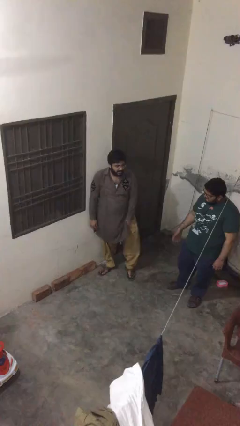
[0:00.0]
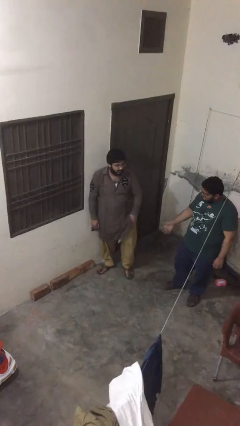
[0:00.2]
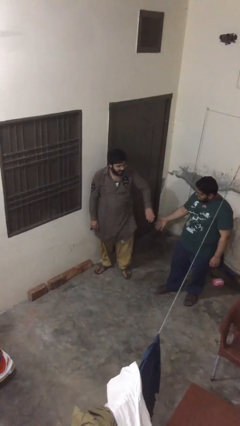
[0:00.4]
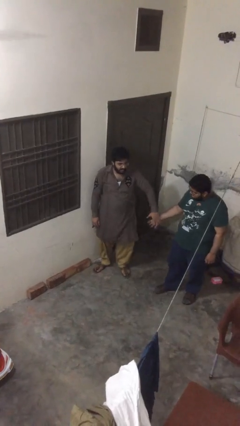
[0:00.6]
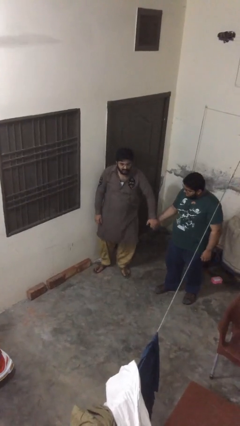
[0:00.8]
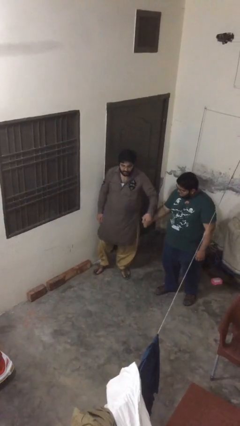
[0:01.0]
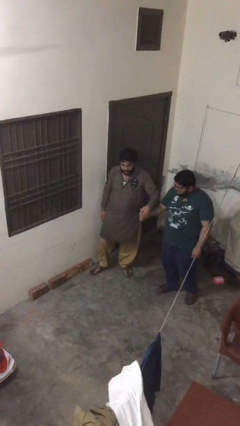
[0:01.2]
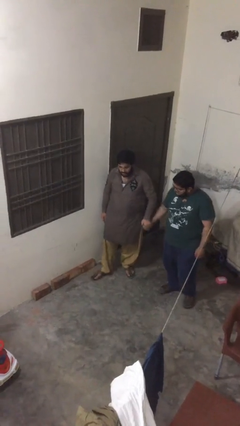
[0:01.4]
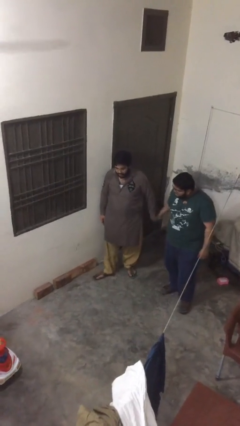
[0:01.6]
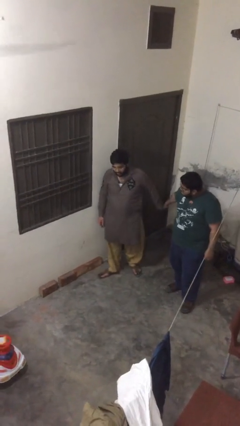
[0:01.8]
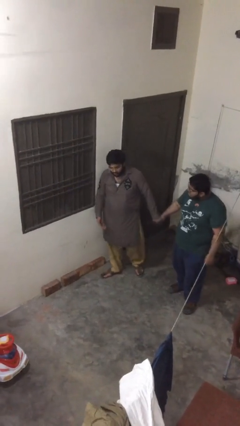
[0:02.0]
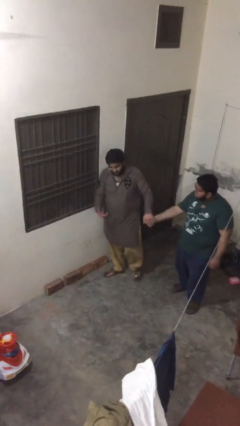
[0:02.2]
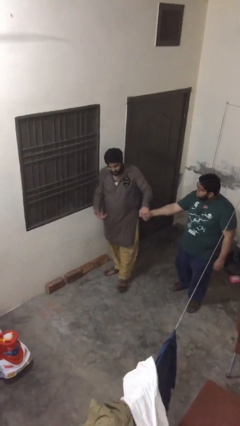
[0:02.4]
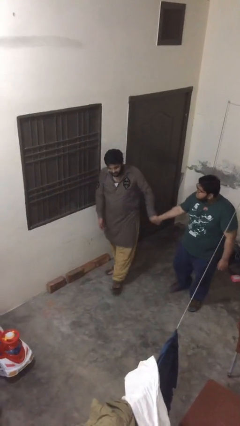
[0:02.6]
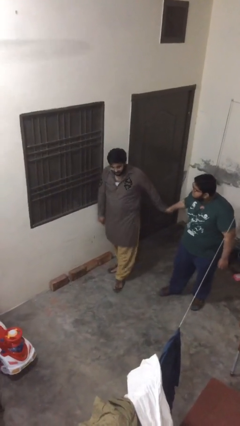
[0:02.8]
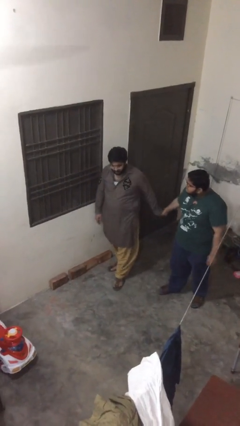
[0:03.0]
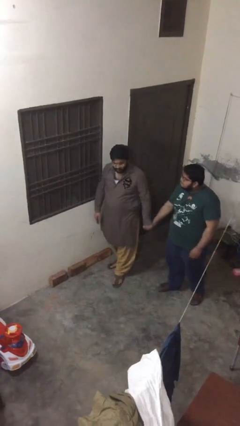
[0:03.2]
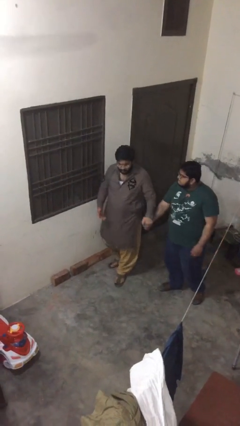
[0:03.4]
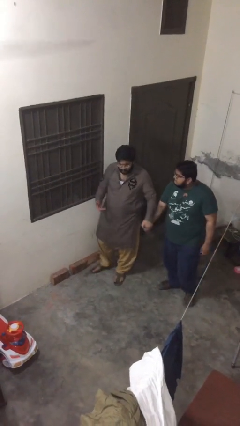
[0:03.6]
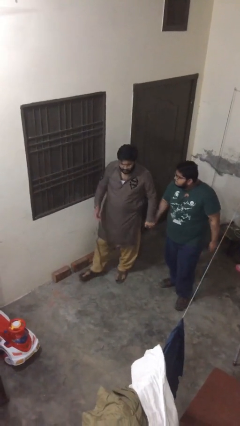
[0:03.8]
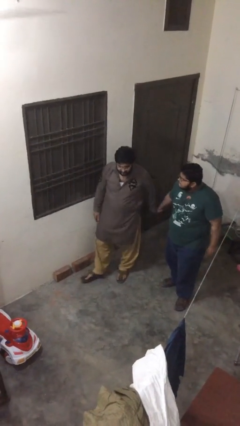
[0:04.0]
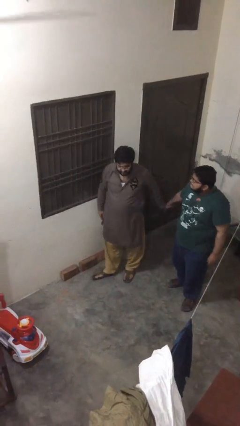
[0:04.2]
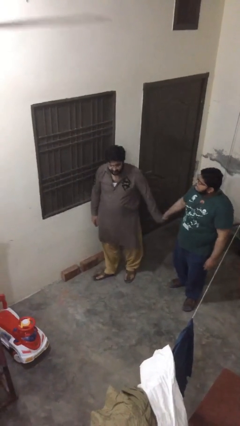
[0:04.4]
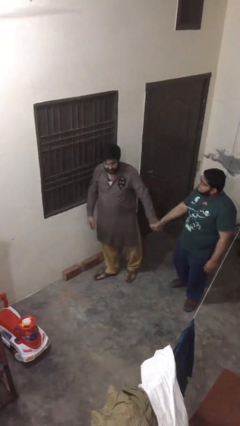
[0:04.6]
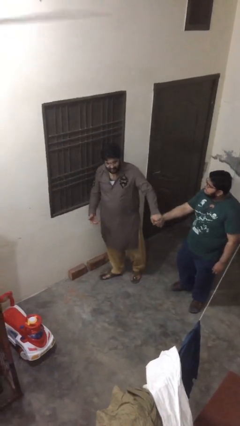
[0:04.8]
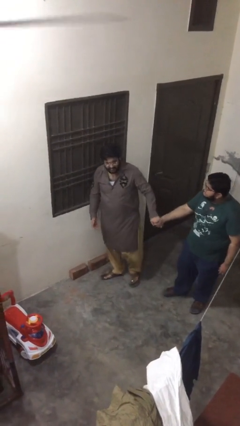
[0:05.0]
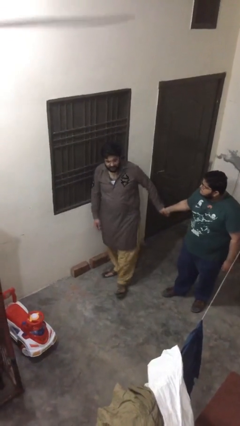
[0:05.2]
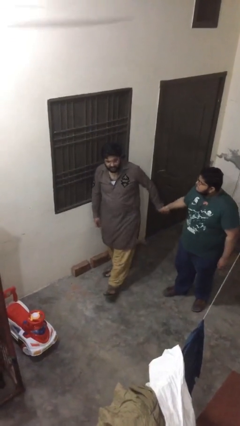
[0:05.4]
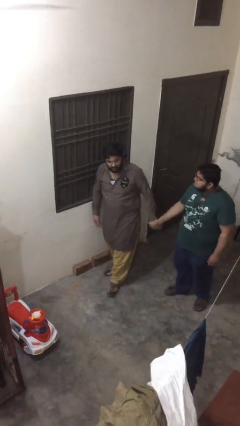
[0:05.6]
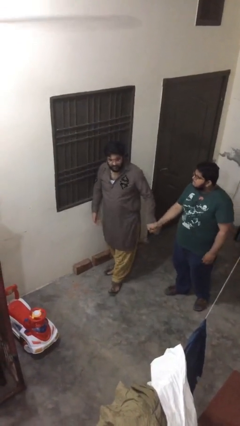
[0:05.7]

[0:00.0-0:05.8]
person holds hand

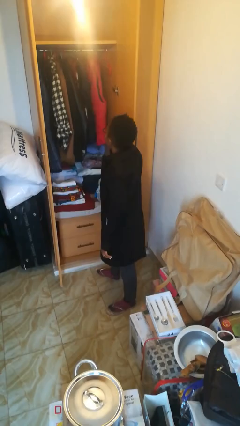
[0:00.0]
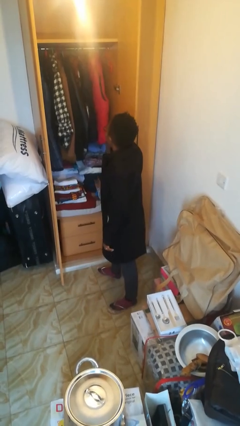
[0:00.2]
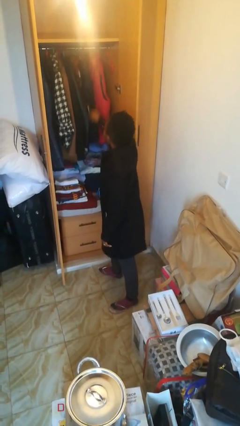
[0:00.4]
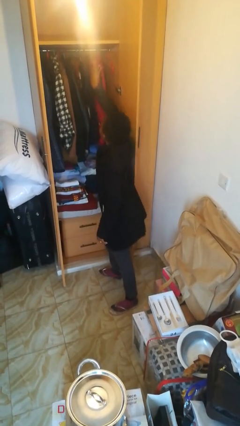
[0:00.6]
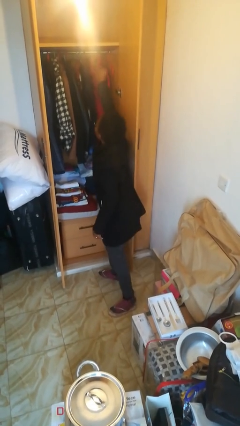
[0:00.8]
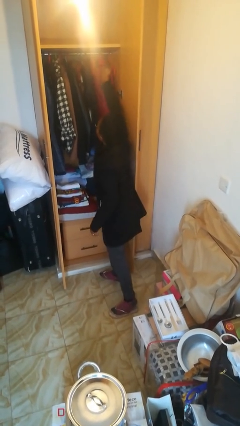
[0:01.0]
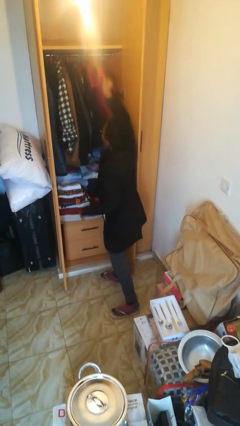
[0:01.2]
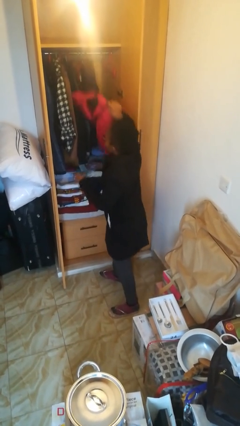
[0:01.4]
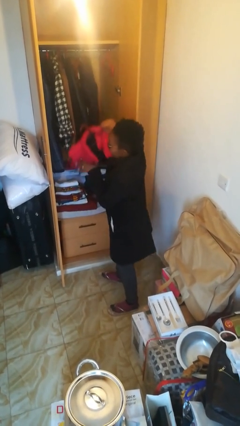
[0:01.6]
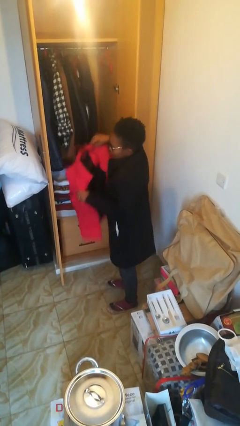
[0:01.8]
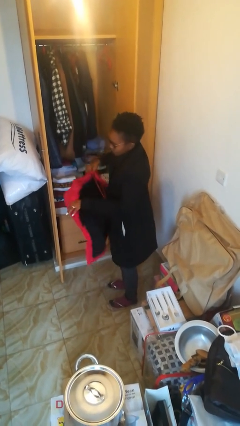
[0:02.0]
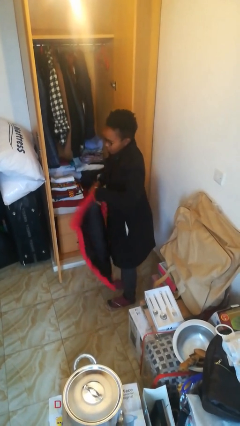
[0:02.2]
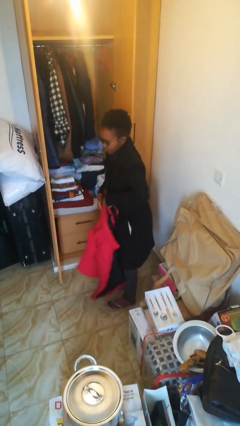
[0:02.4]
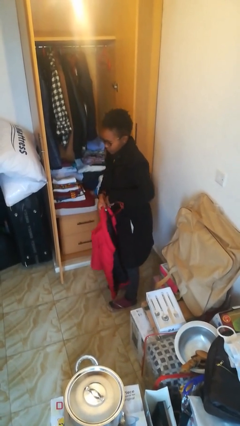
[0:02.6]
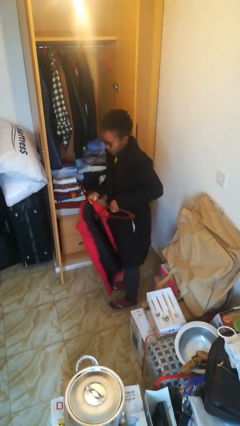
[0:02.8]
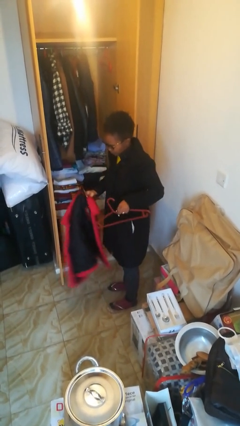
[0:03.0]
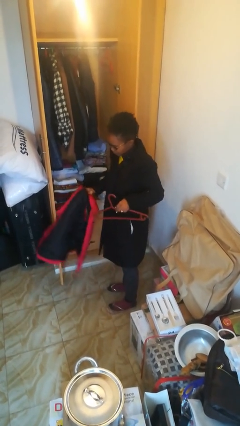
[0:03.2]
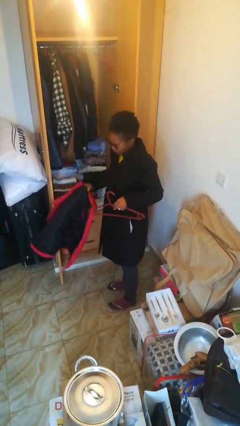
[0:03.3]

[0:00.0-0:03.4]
person takes clothes from closet

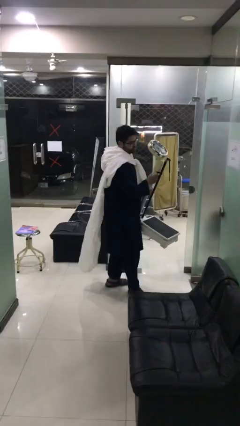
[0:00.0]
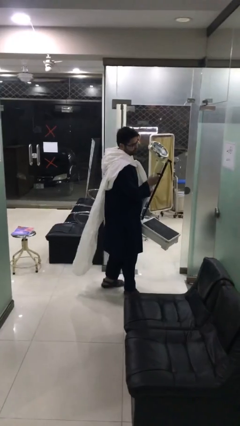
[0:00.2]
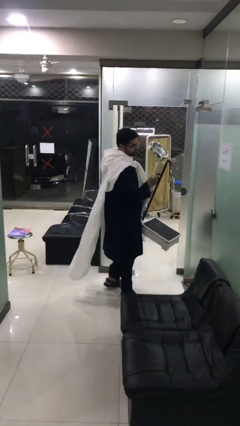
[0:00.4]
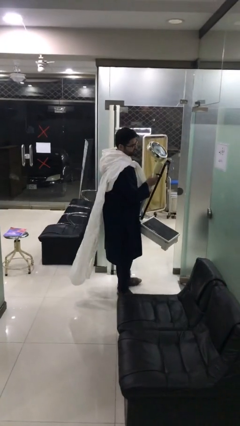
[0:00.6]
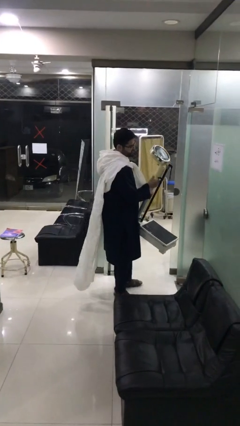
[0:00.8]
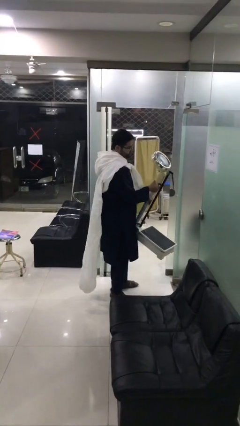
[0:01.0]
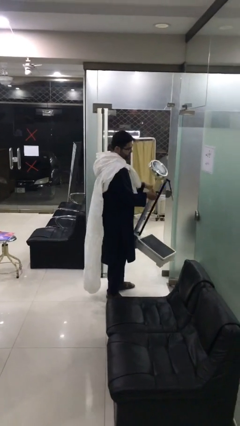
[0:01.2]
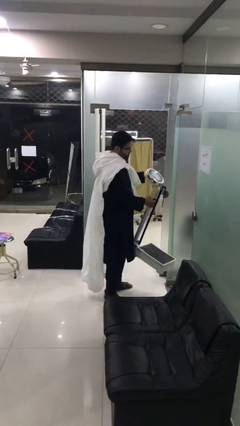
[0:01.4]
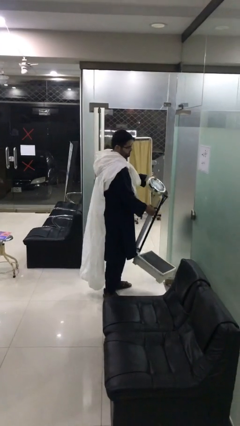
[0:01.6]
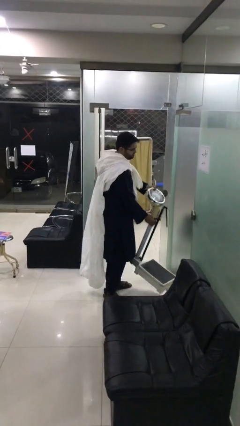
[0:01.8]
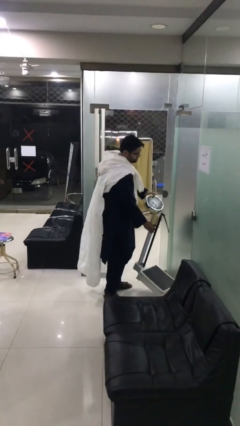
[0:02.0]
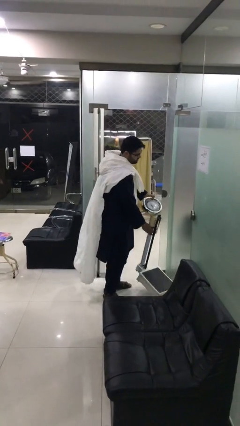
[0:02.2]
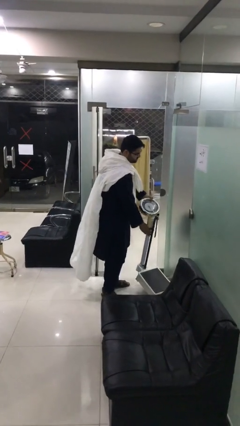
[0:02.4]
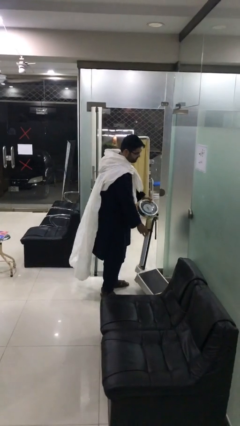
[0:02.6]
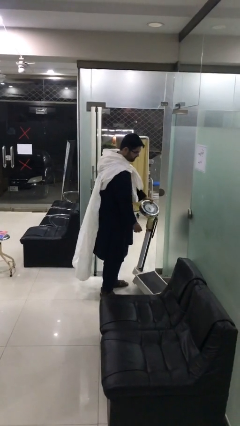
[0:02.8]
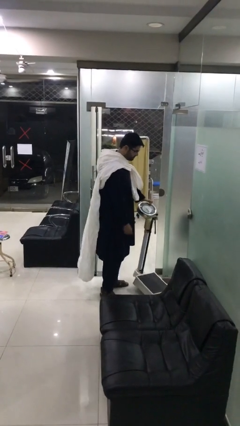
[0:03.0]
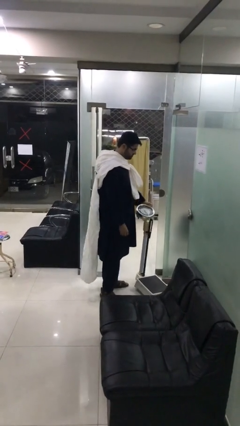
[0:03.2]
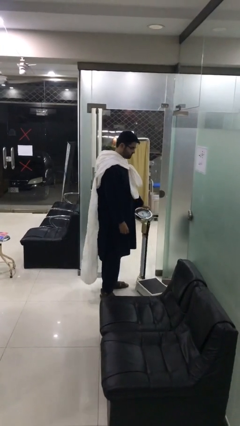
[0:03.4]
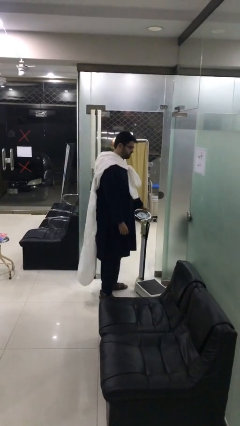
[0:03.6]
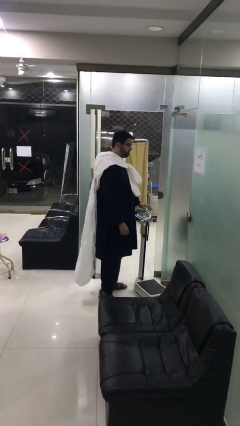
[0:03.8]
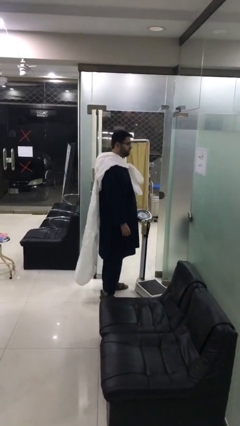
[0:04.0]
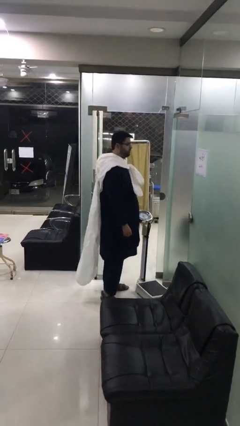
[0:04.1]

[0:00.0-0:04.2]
person puts down object on floor

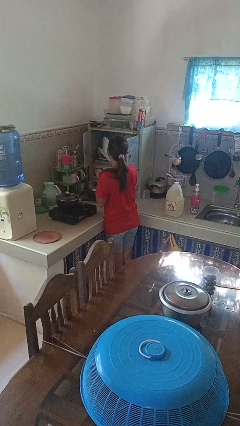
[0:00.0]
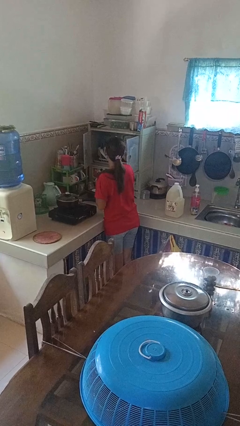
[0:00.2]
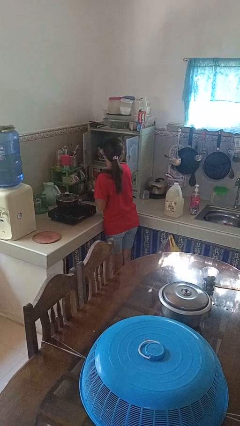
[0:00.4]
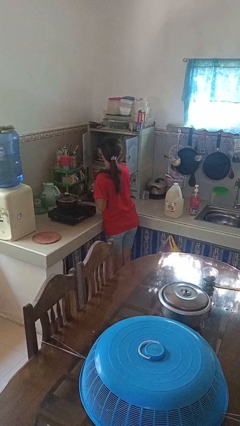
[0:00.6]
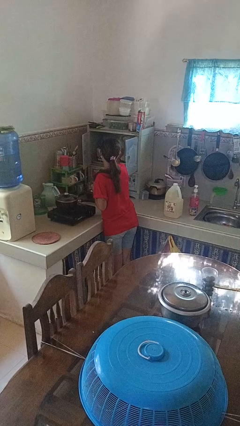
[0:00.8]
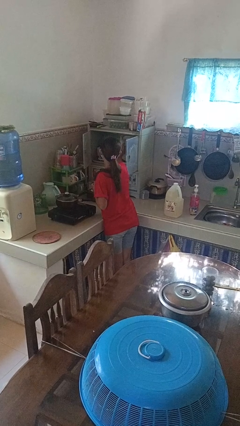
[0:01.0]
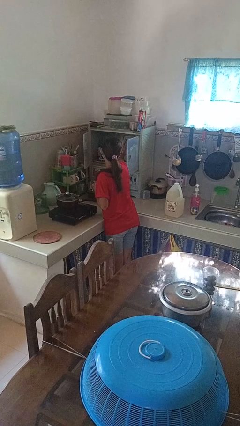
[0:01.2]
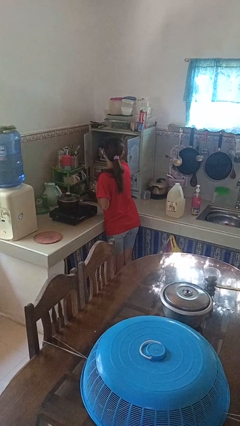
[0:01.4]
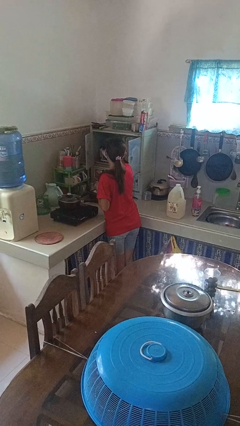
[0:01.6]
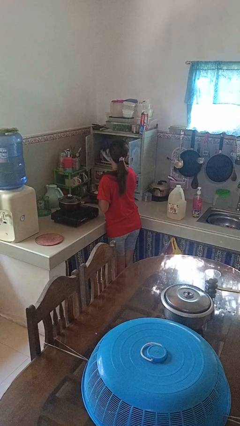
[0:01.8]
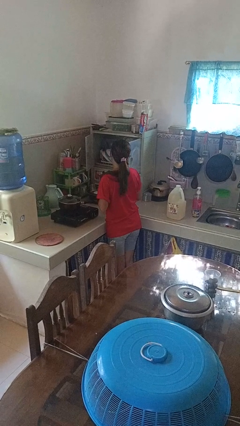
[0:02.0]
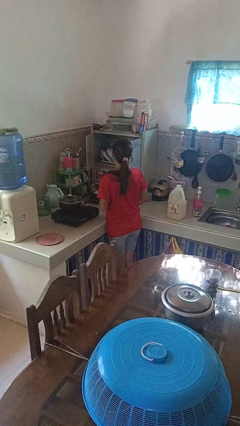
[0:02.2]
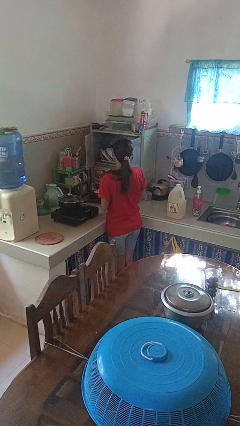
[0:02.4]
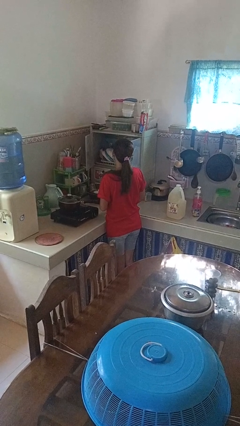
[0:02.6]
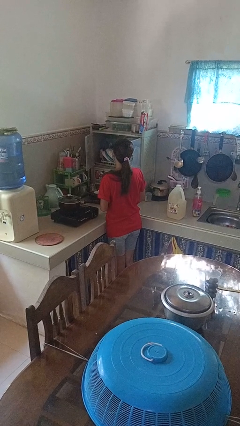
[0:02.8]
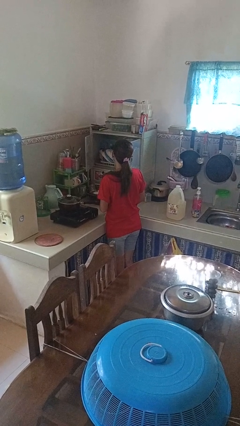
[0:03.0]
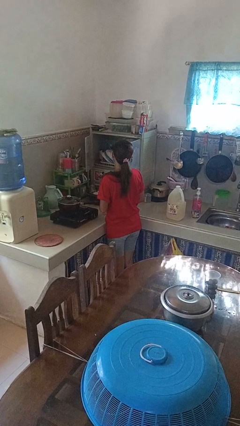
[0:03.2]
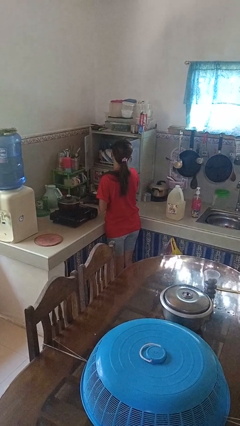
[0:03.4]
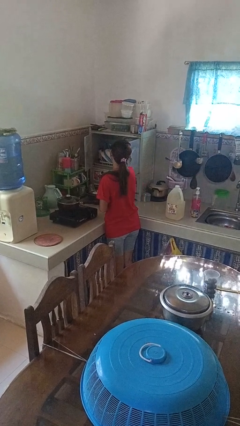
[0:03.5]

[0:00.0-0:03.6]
person puts object in cabinet

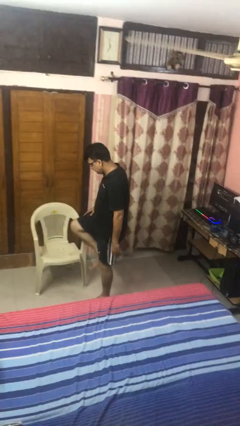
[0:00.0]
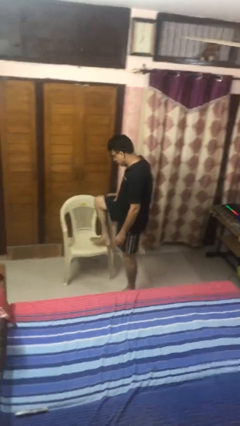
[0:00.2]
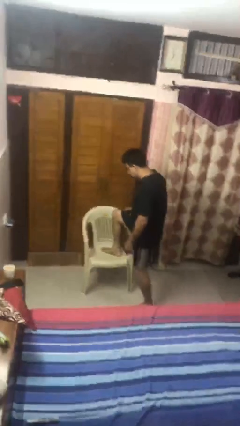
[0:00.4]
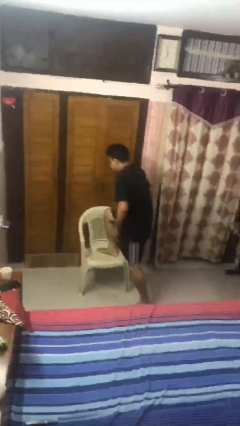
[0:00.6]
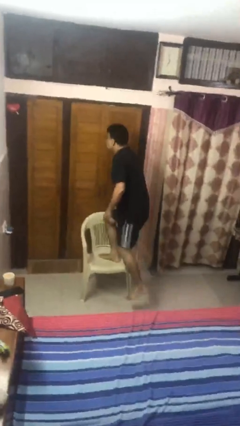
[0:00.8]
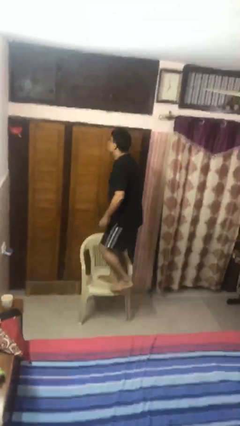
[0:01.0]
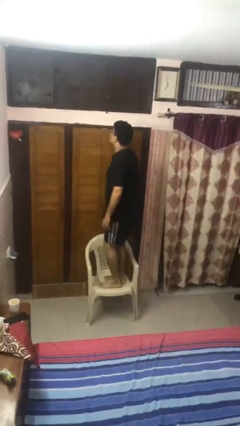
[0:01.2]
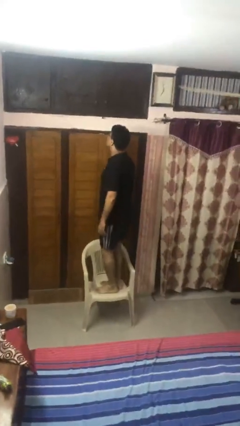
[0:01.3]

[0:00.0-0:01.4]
person climbs on chair
